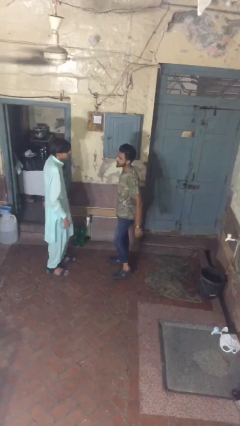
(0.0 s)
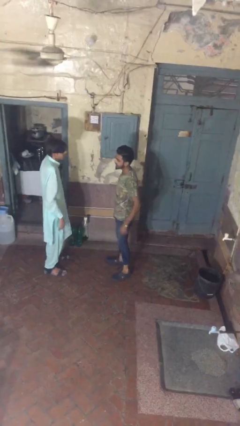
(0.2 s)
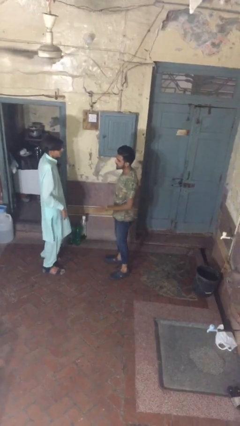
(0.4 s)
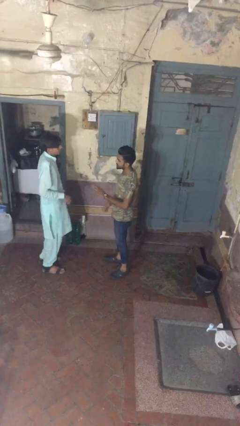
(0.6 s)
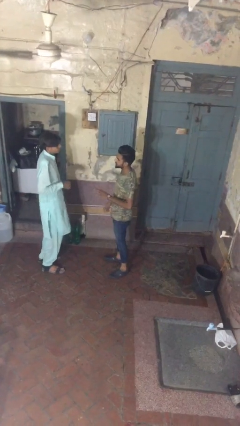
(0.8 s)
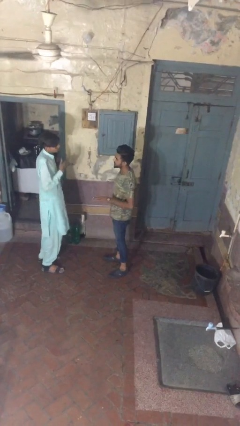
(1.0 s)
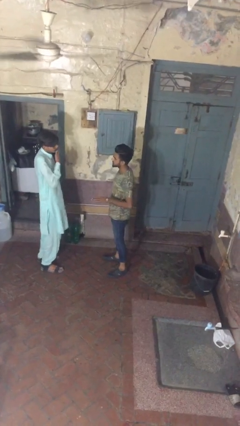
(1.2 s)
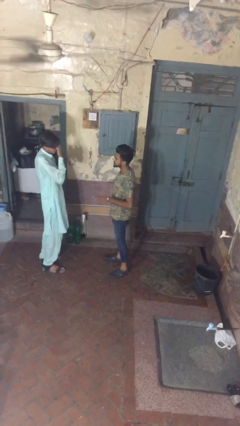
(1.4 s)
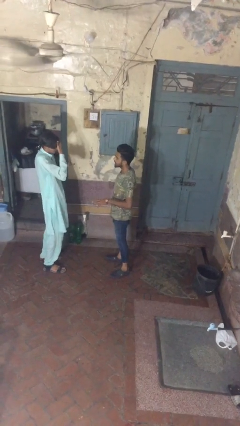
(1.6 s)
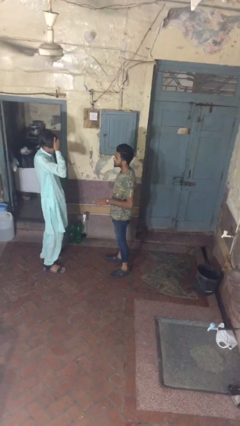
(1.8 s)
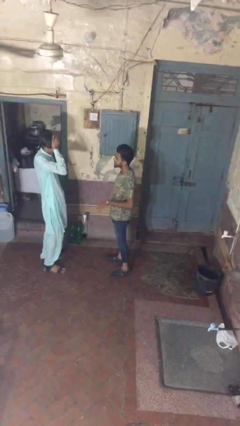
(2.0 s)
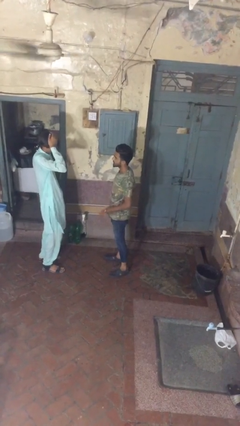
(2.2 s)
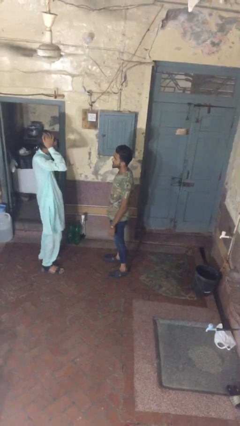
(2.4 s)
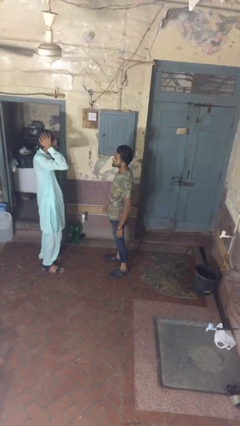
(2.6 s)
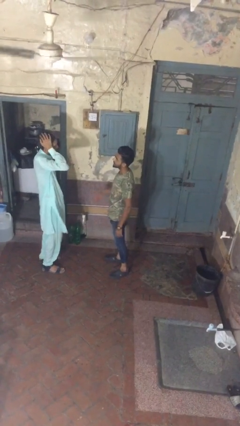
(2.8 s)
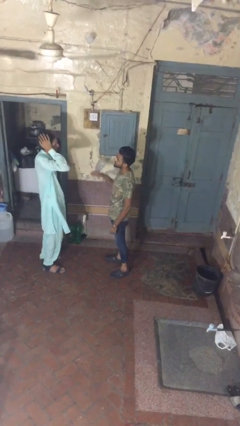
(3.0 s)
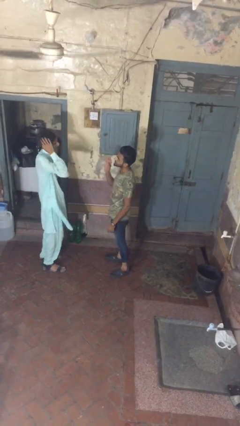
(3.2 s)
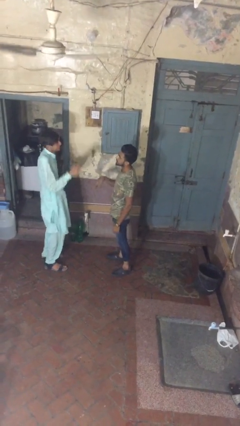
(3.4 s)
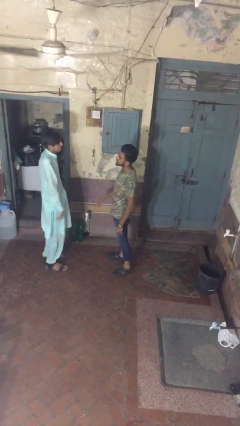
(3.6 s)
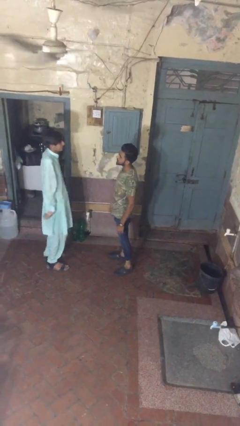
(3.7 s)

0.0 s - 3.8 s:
person talks to person

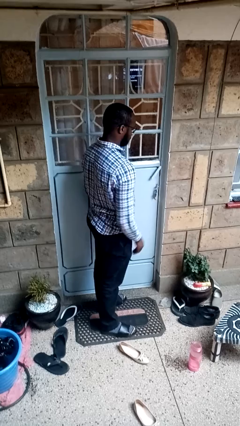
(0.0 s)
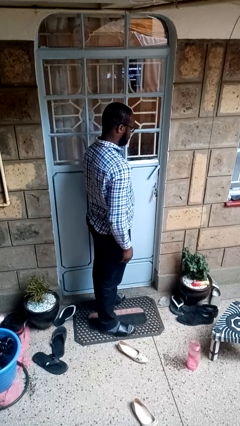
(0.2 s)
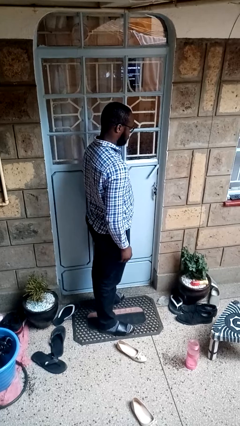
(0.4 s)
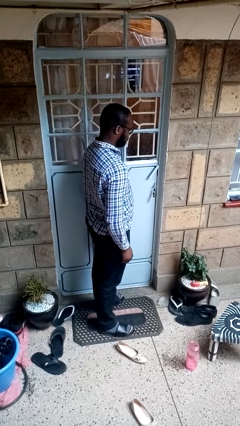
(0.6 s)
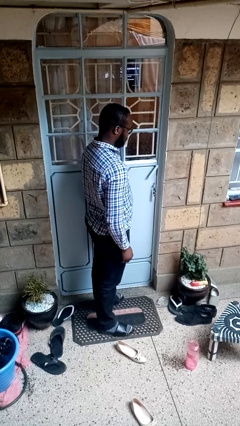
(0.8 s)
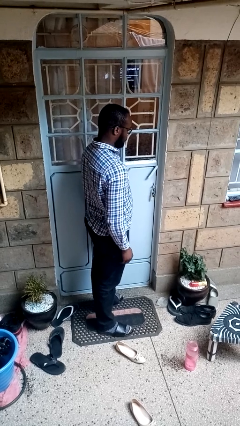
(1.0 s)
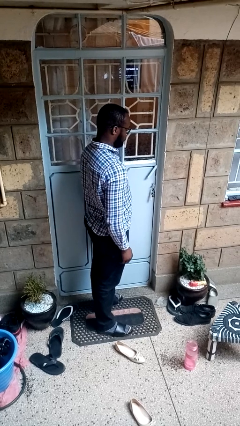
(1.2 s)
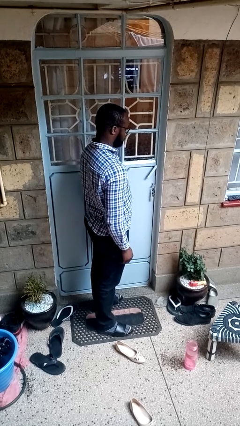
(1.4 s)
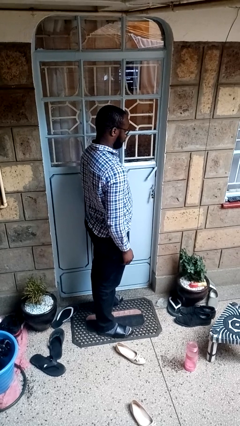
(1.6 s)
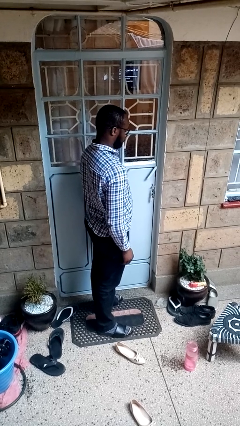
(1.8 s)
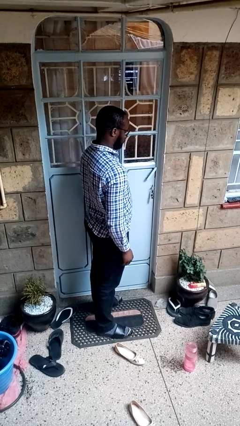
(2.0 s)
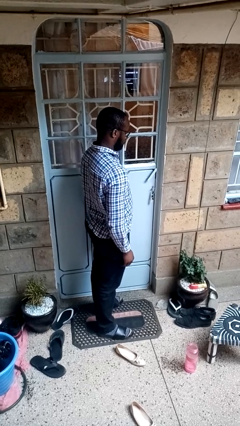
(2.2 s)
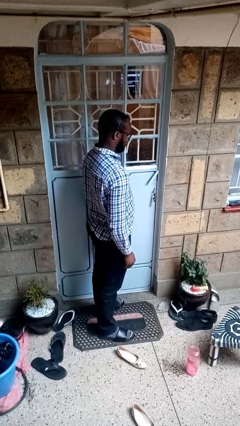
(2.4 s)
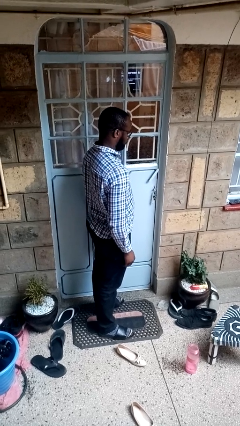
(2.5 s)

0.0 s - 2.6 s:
person locks door with keys

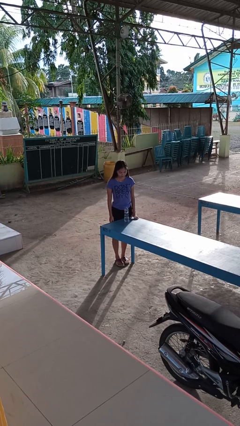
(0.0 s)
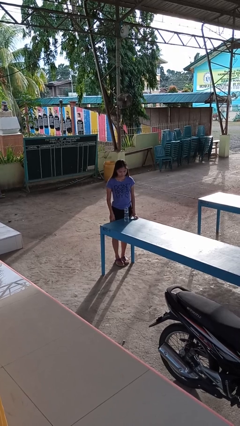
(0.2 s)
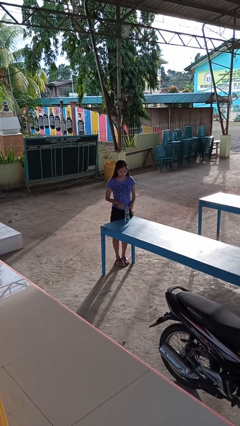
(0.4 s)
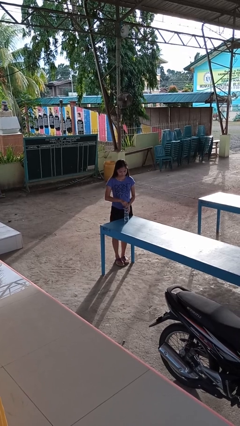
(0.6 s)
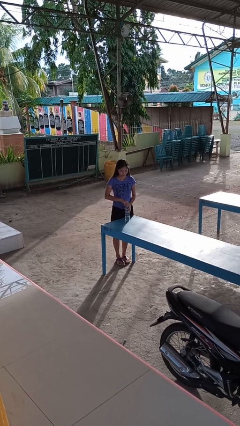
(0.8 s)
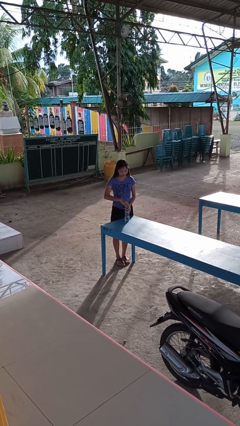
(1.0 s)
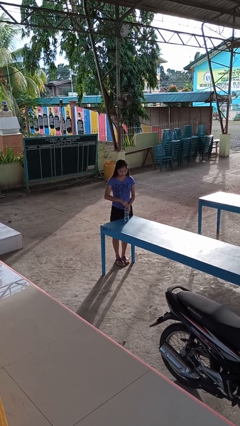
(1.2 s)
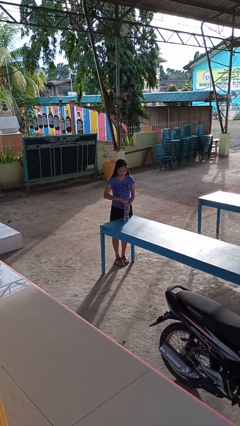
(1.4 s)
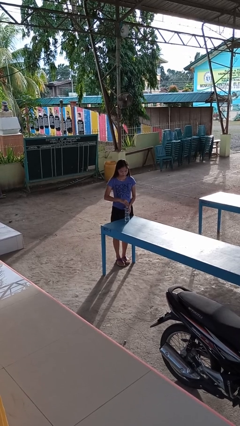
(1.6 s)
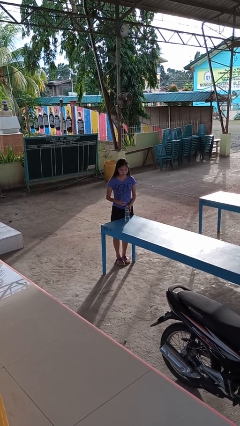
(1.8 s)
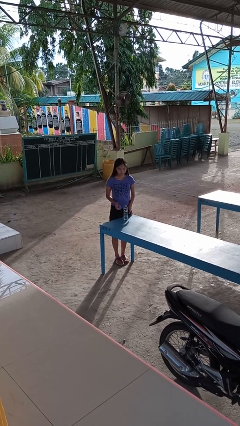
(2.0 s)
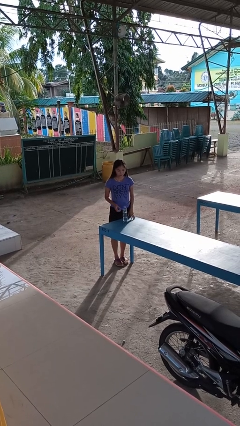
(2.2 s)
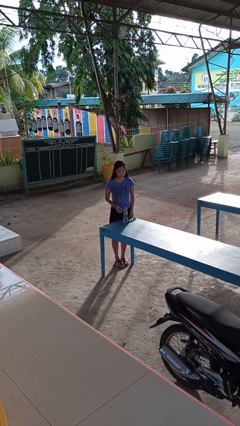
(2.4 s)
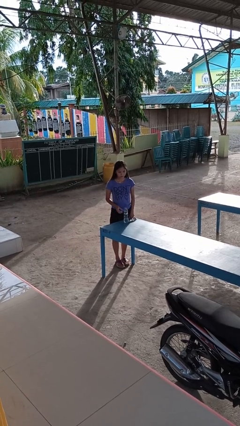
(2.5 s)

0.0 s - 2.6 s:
person unscrews lid from bottle

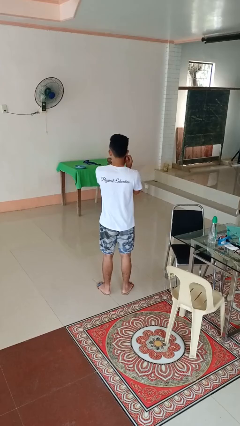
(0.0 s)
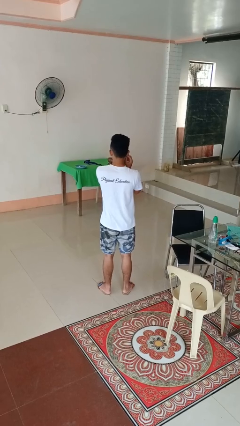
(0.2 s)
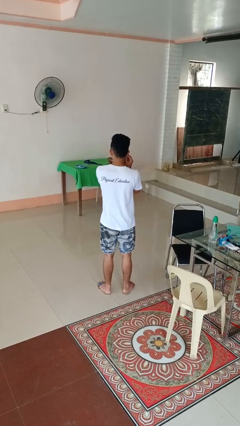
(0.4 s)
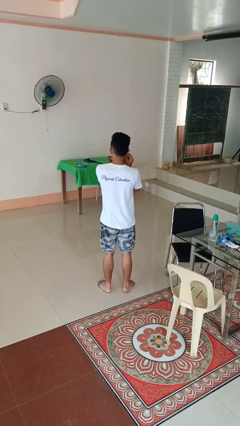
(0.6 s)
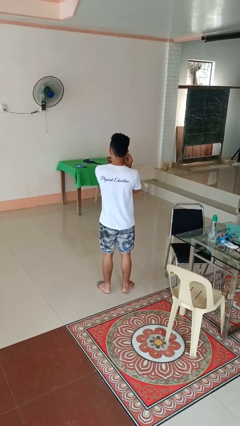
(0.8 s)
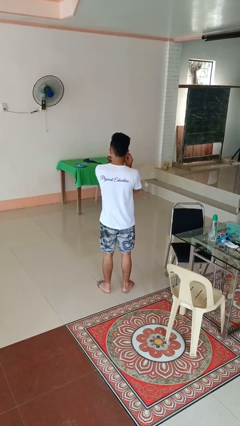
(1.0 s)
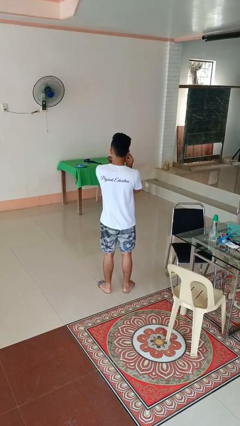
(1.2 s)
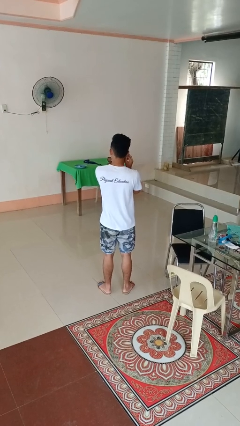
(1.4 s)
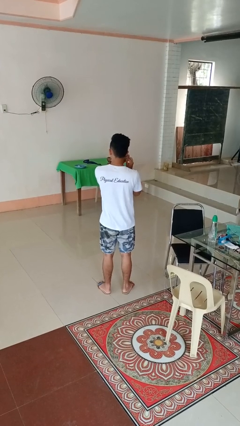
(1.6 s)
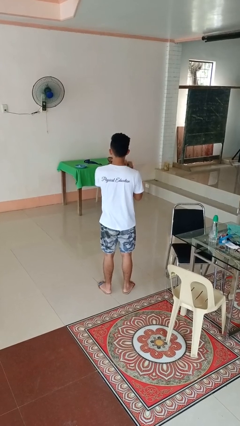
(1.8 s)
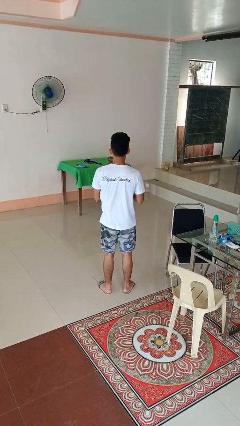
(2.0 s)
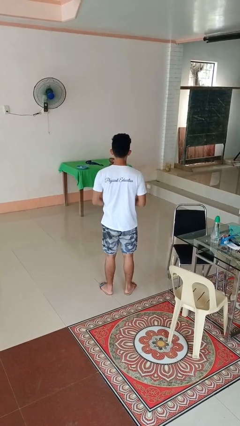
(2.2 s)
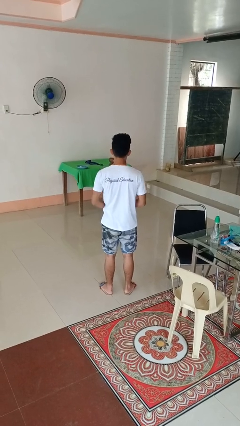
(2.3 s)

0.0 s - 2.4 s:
person takes off earrings

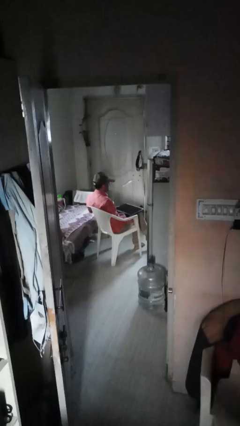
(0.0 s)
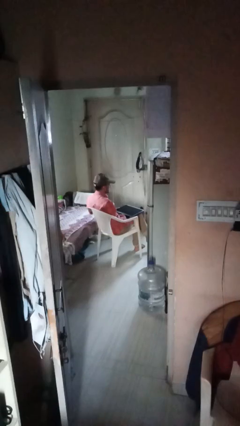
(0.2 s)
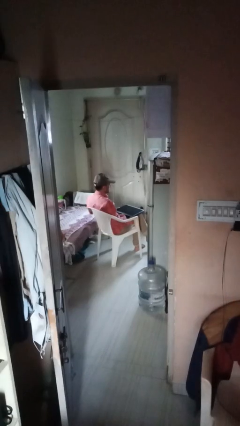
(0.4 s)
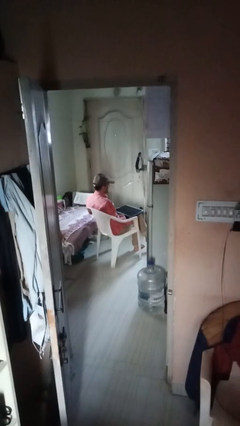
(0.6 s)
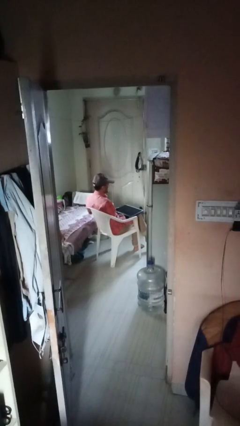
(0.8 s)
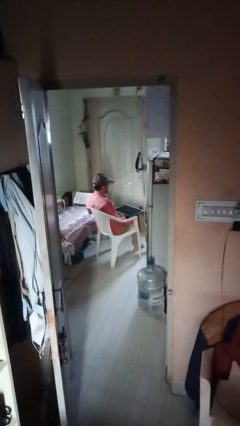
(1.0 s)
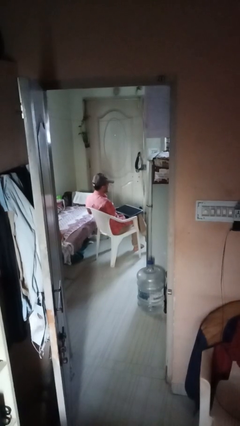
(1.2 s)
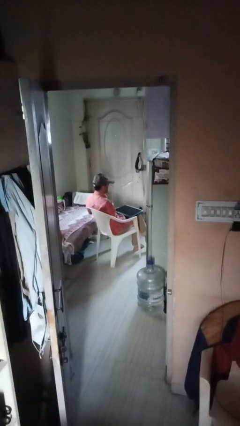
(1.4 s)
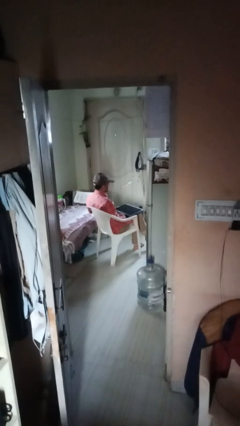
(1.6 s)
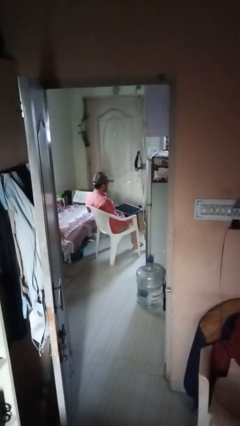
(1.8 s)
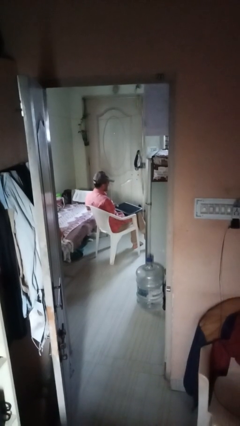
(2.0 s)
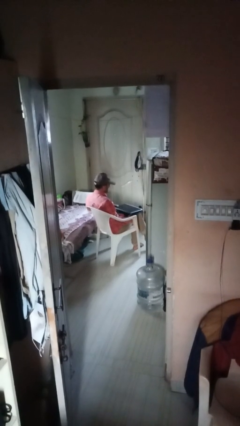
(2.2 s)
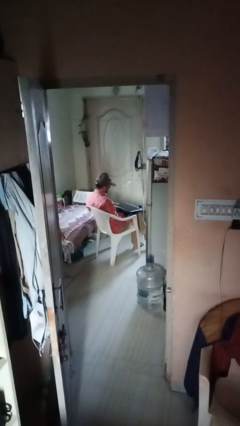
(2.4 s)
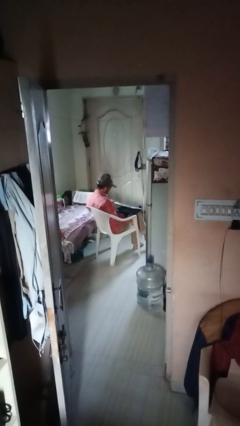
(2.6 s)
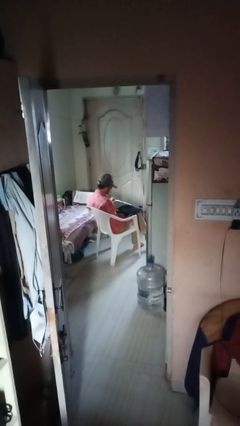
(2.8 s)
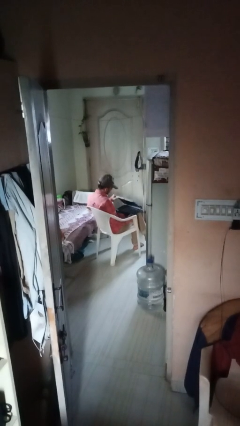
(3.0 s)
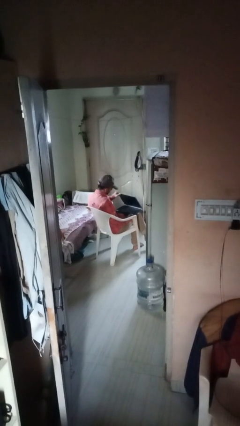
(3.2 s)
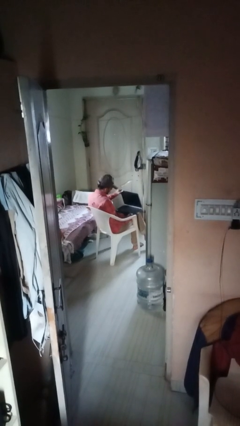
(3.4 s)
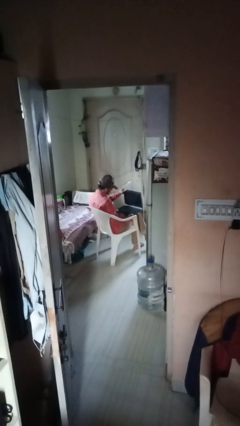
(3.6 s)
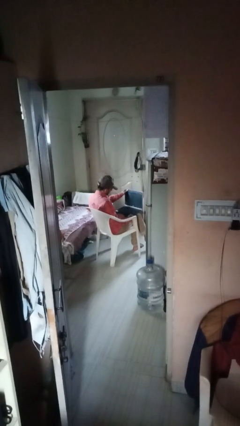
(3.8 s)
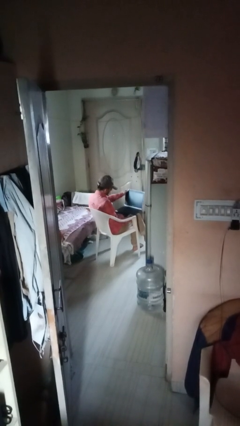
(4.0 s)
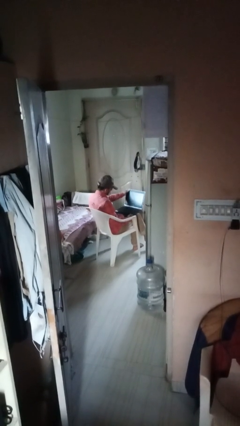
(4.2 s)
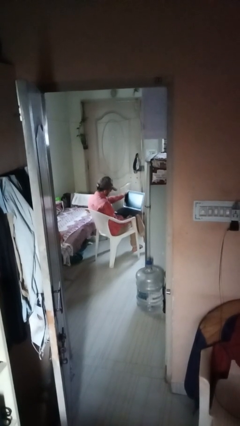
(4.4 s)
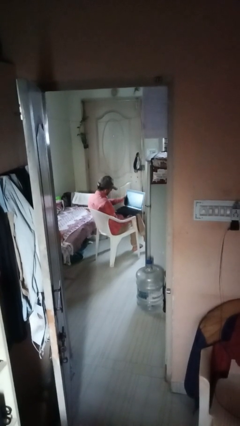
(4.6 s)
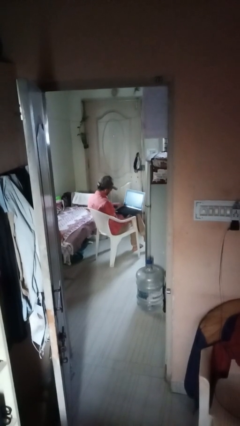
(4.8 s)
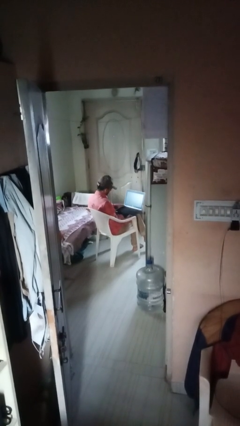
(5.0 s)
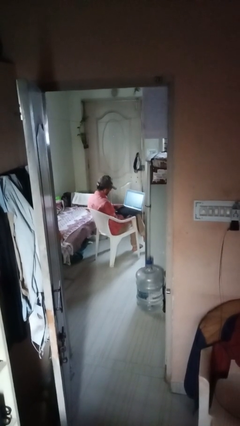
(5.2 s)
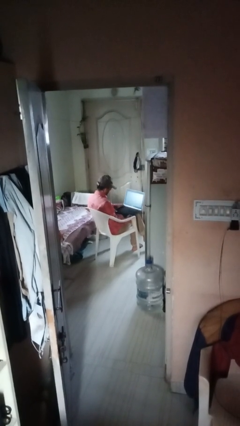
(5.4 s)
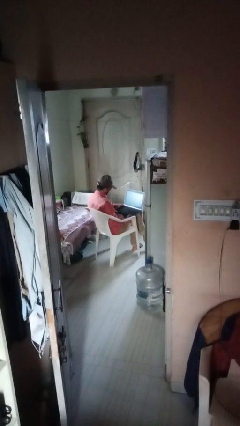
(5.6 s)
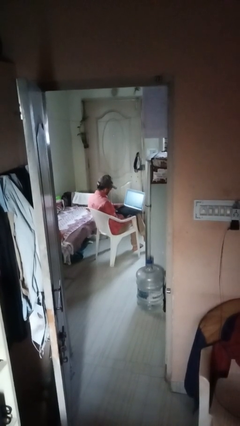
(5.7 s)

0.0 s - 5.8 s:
person opens laptop

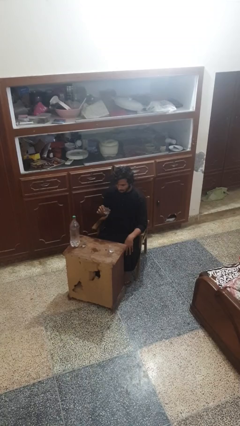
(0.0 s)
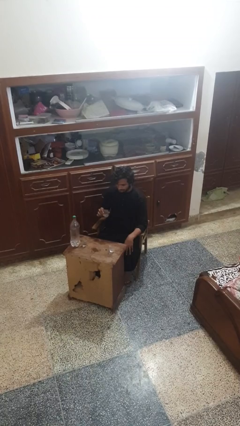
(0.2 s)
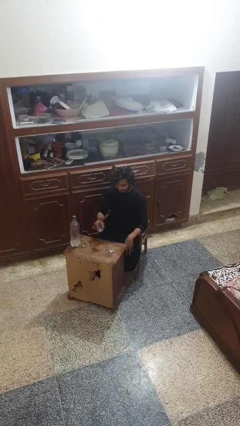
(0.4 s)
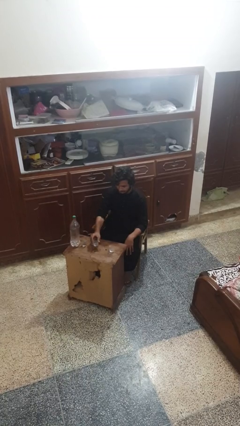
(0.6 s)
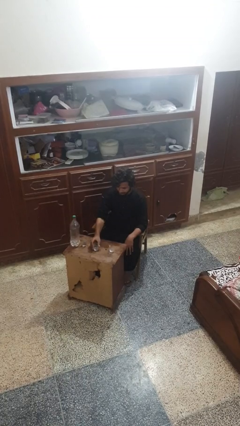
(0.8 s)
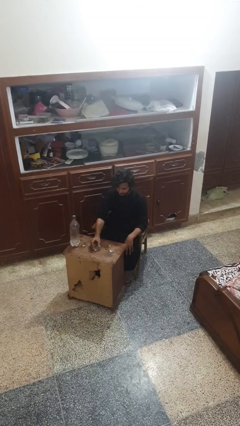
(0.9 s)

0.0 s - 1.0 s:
person puts down object on table
